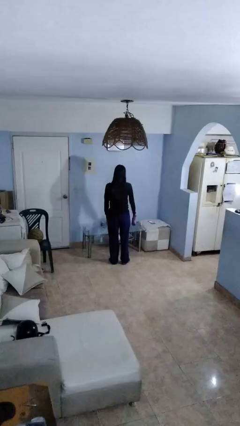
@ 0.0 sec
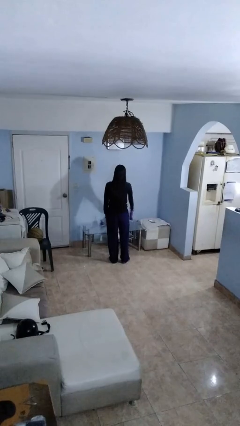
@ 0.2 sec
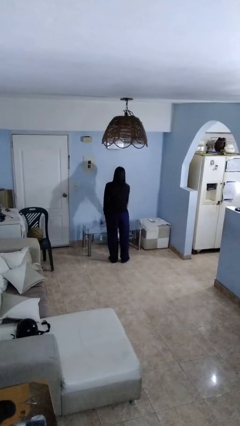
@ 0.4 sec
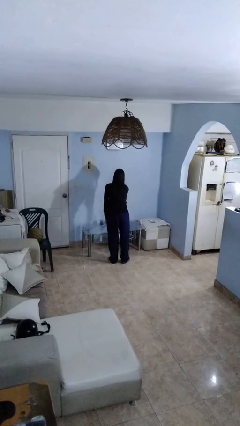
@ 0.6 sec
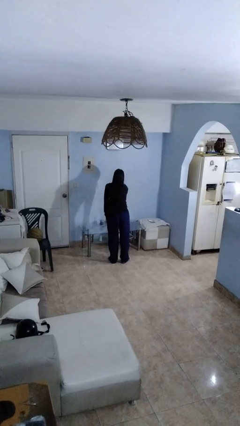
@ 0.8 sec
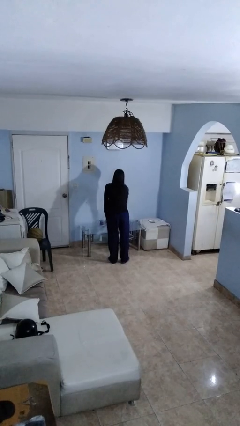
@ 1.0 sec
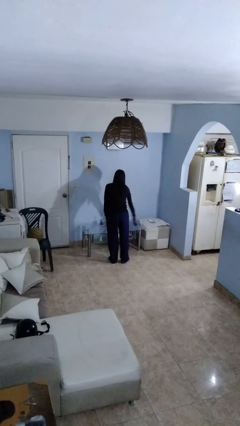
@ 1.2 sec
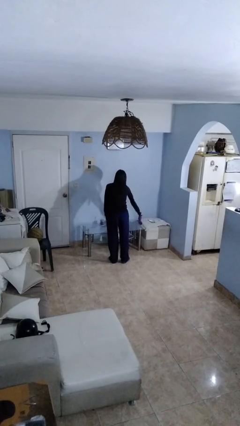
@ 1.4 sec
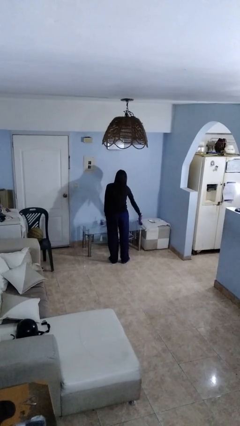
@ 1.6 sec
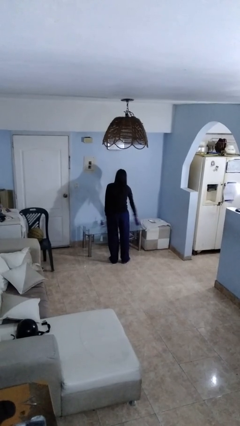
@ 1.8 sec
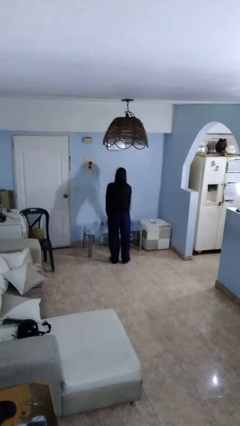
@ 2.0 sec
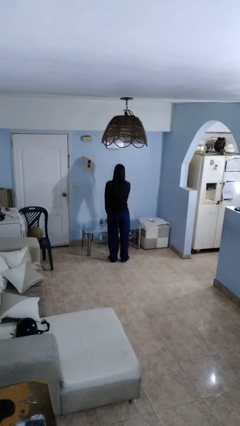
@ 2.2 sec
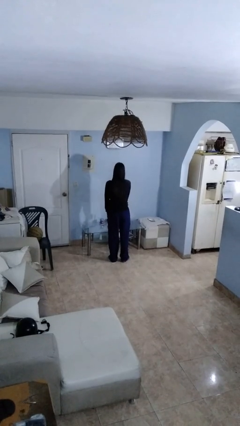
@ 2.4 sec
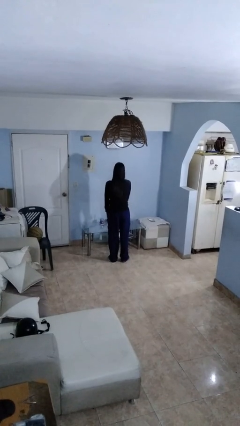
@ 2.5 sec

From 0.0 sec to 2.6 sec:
person sprays from bottle

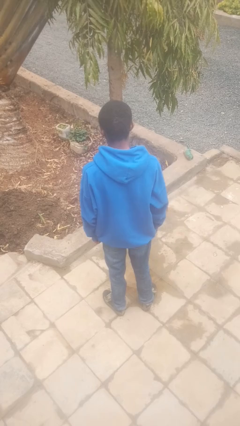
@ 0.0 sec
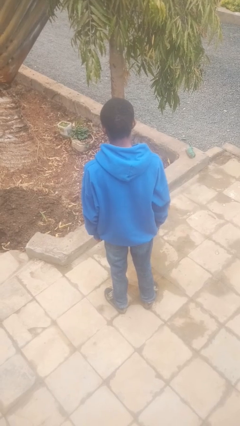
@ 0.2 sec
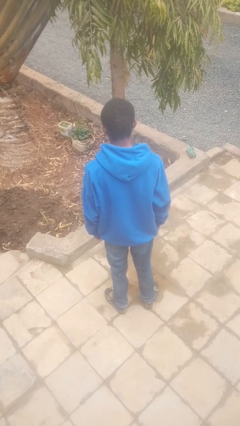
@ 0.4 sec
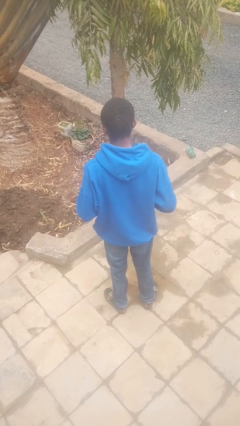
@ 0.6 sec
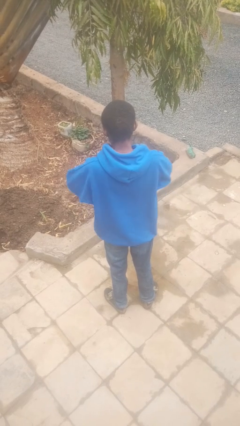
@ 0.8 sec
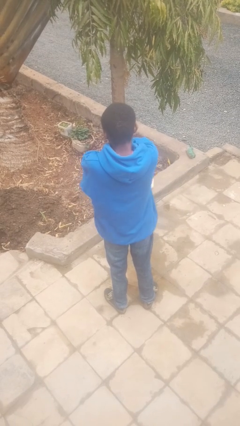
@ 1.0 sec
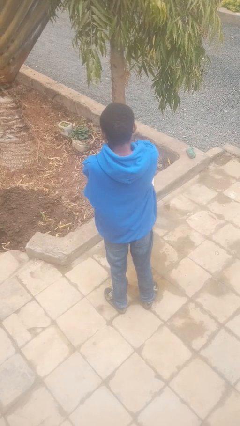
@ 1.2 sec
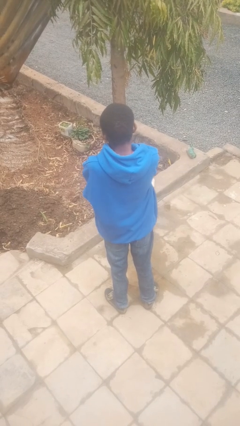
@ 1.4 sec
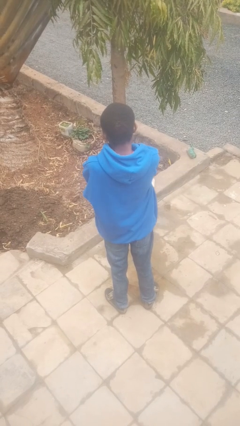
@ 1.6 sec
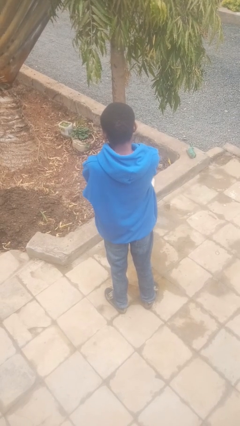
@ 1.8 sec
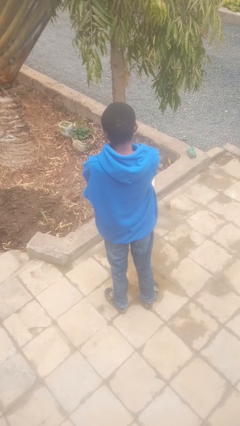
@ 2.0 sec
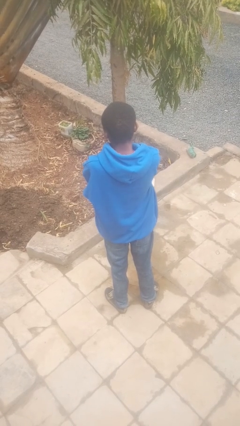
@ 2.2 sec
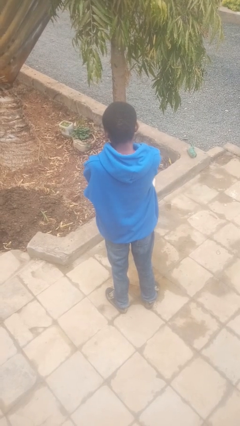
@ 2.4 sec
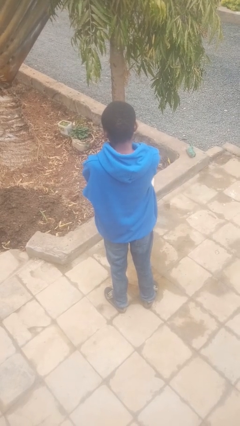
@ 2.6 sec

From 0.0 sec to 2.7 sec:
person crosses arms

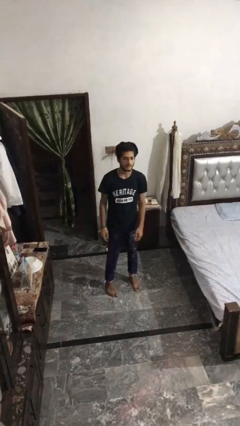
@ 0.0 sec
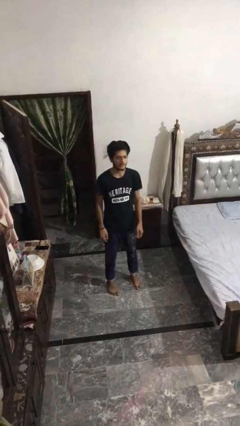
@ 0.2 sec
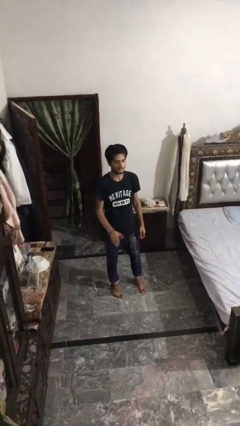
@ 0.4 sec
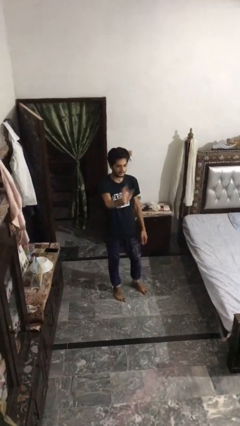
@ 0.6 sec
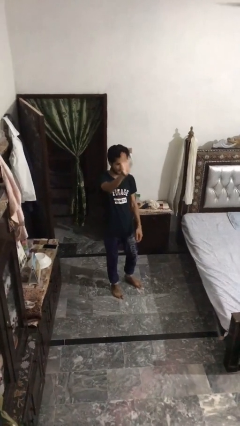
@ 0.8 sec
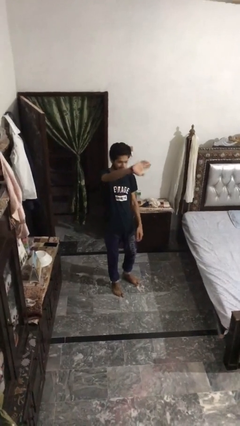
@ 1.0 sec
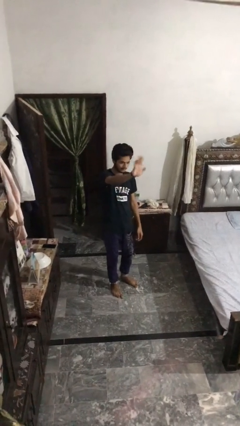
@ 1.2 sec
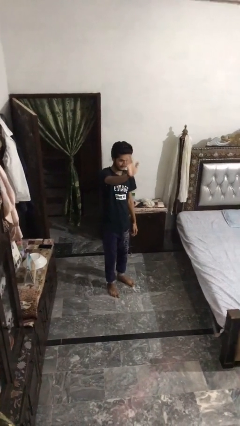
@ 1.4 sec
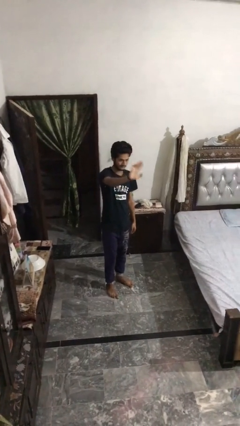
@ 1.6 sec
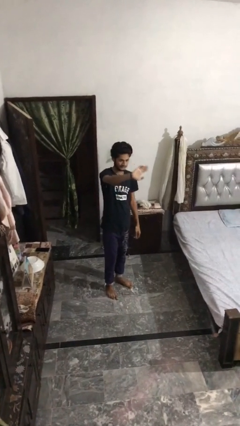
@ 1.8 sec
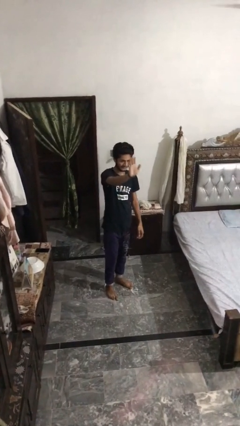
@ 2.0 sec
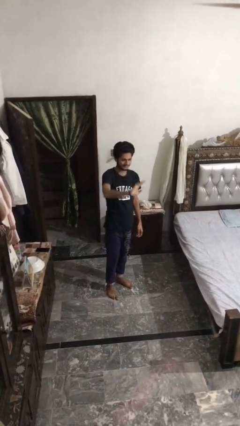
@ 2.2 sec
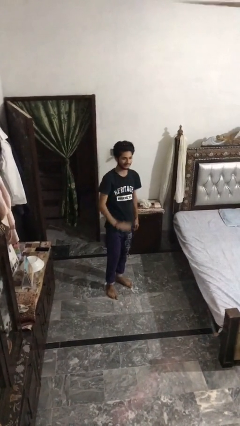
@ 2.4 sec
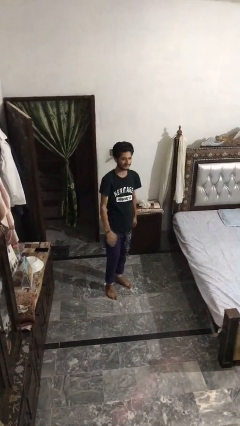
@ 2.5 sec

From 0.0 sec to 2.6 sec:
person waves at person

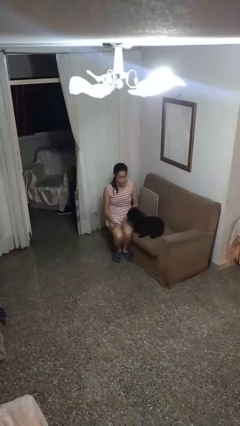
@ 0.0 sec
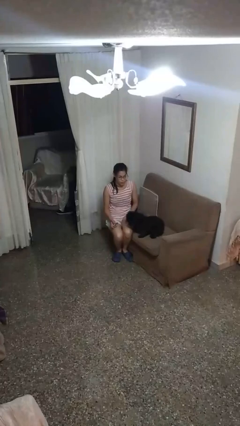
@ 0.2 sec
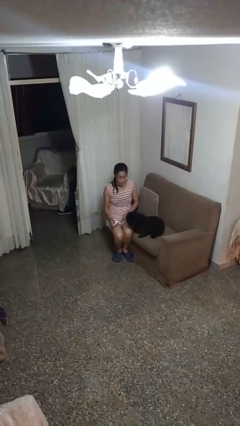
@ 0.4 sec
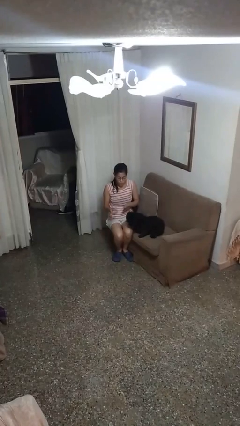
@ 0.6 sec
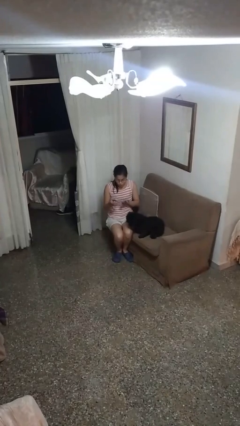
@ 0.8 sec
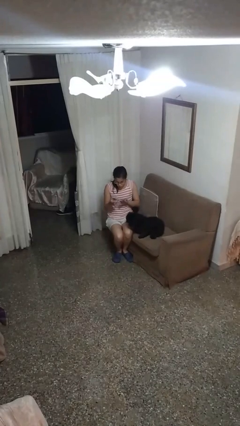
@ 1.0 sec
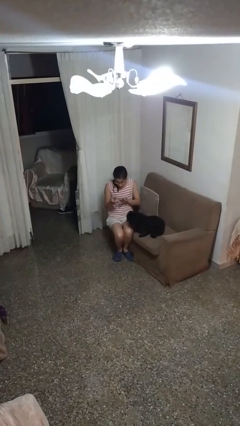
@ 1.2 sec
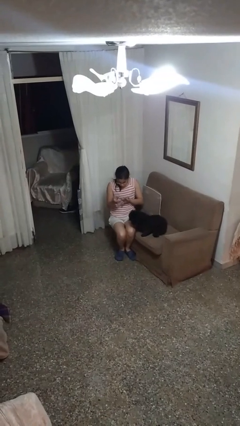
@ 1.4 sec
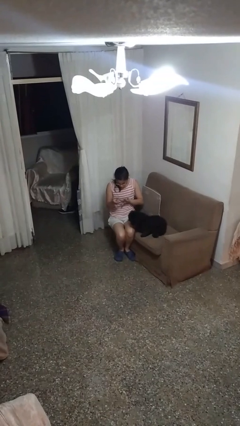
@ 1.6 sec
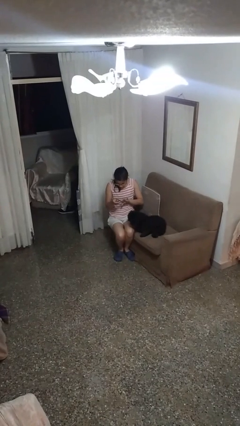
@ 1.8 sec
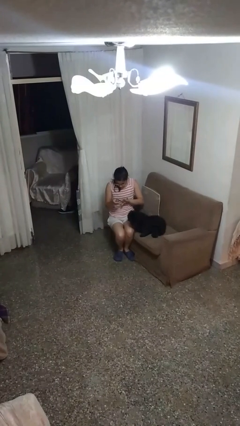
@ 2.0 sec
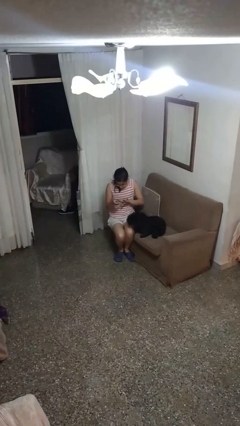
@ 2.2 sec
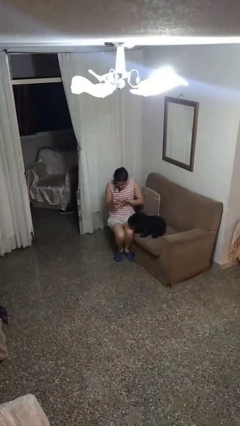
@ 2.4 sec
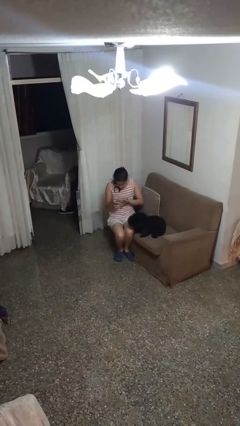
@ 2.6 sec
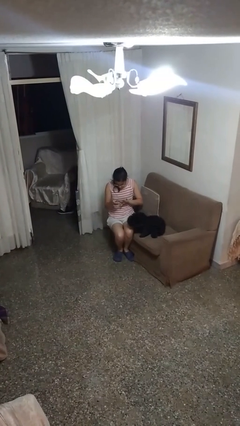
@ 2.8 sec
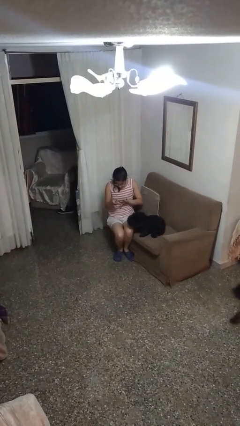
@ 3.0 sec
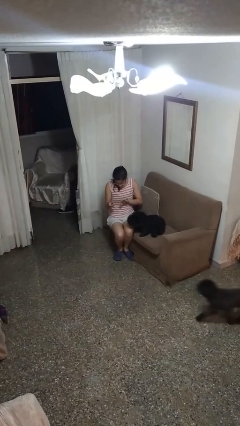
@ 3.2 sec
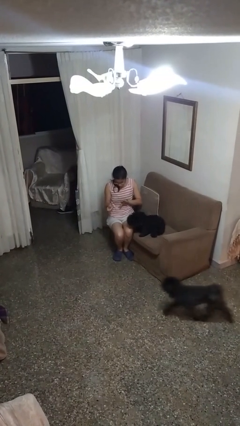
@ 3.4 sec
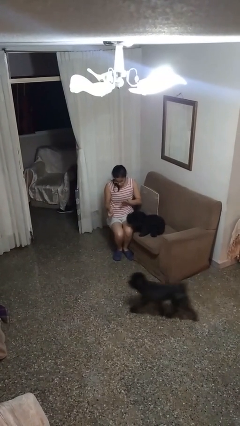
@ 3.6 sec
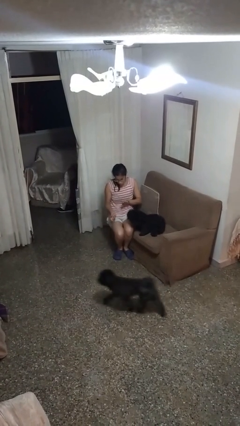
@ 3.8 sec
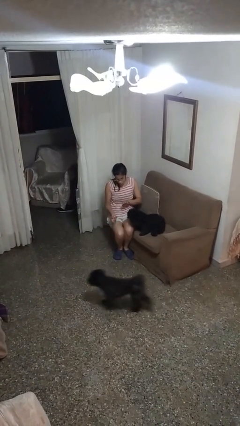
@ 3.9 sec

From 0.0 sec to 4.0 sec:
person clips fingernails

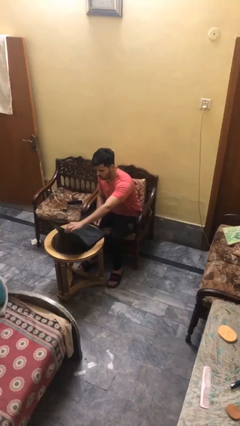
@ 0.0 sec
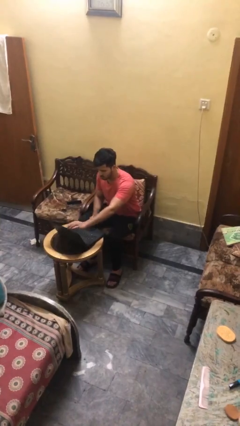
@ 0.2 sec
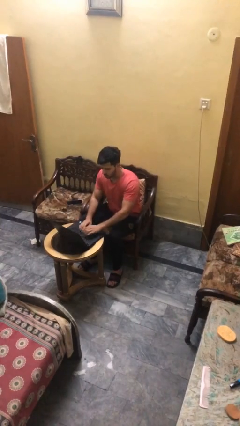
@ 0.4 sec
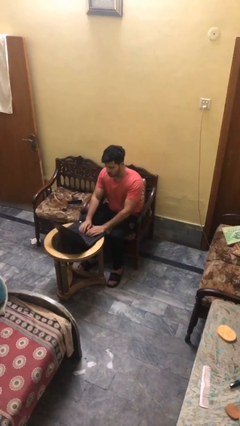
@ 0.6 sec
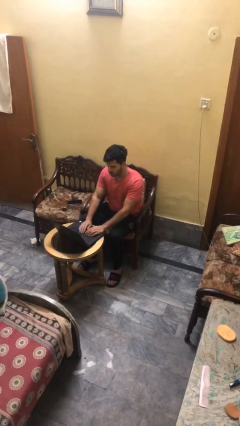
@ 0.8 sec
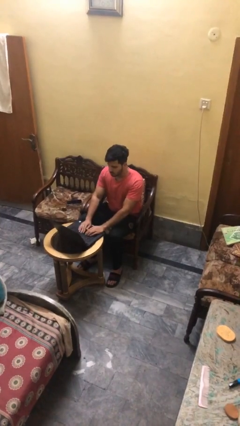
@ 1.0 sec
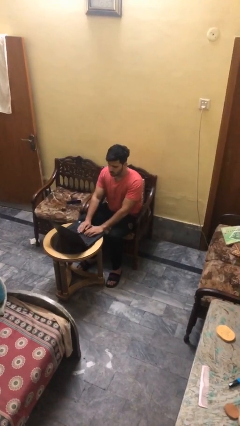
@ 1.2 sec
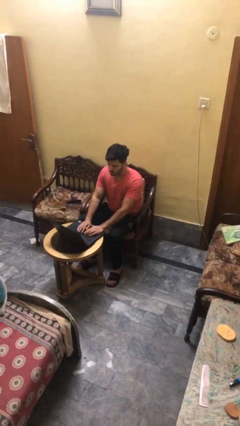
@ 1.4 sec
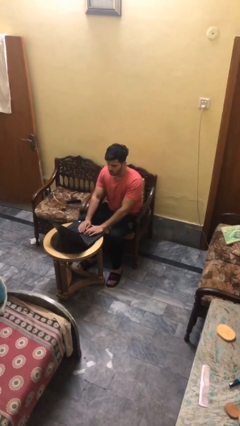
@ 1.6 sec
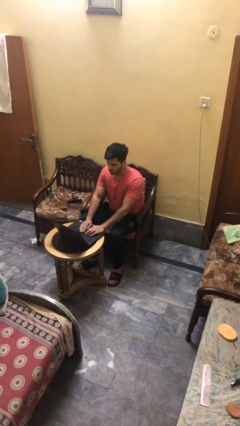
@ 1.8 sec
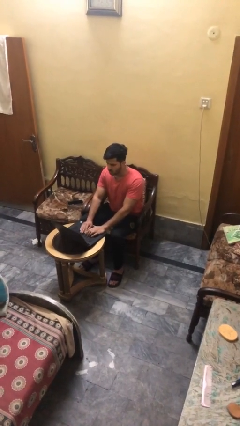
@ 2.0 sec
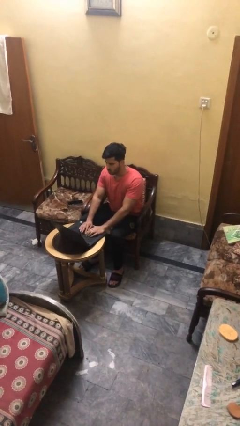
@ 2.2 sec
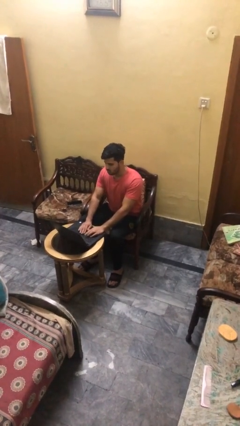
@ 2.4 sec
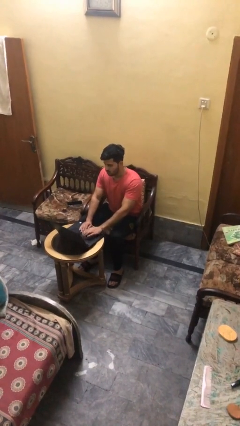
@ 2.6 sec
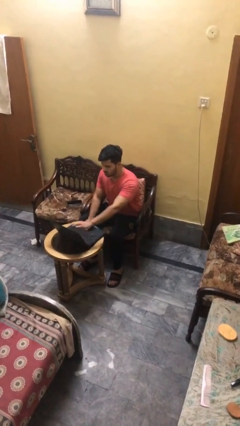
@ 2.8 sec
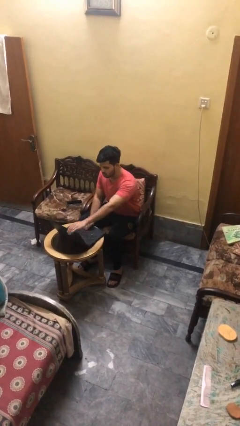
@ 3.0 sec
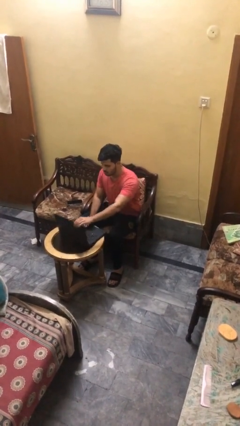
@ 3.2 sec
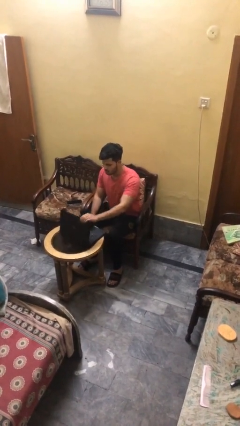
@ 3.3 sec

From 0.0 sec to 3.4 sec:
person interacts with laptop

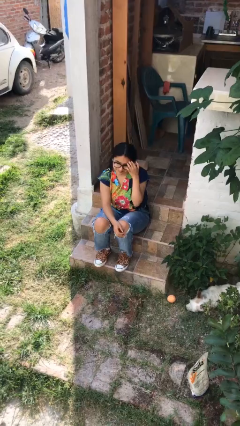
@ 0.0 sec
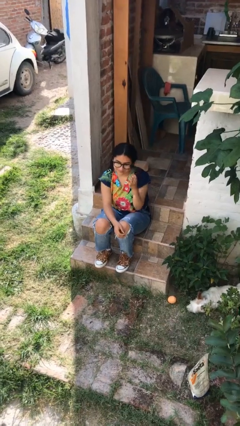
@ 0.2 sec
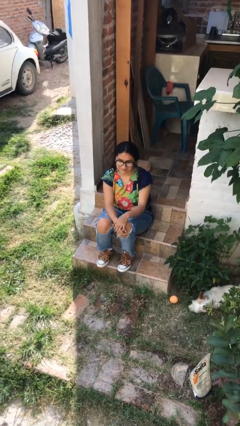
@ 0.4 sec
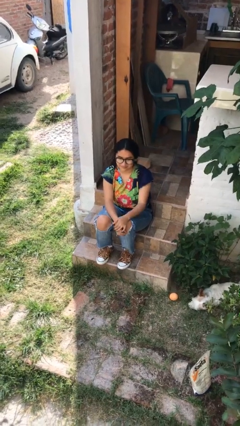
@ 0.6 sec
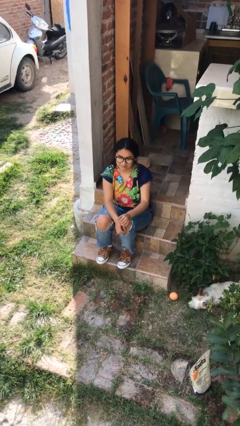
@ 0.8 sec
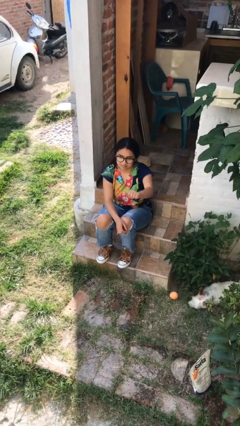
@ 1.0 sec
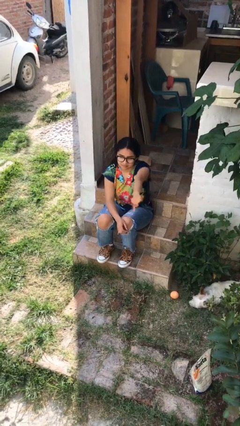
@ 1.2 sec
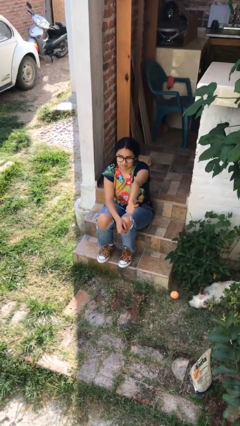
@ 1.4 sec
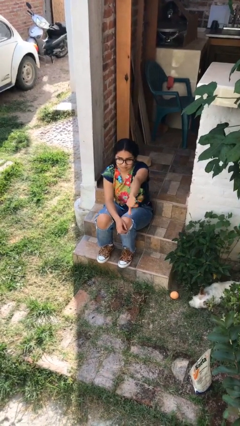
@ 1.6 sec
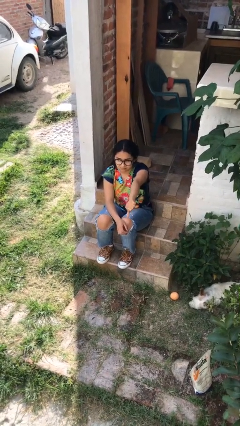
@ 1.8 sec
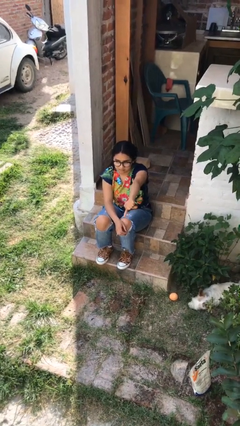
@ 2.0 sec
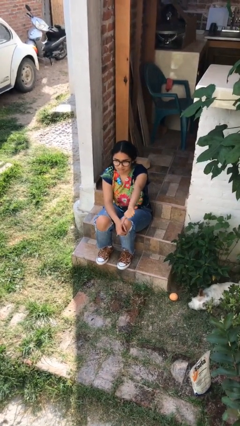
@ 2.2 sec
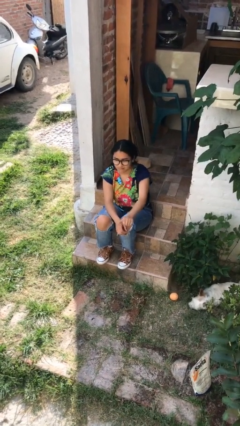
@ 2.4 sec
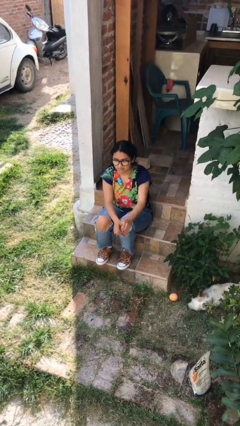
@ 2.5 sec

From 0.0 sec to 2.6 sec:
person gestures thumbs down
